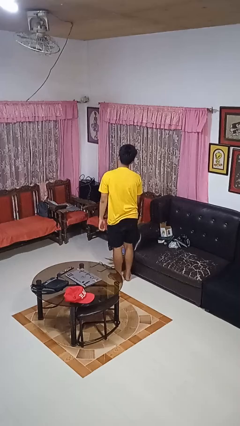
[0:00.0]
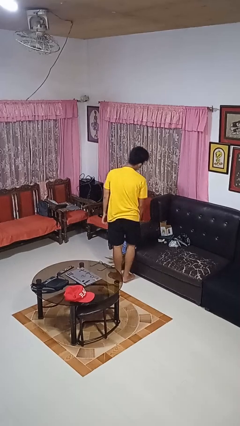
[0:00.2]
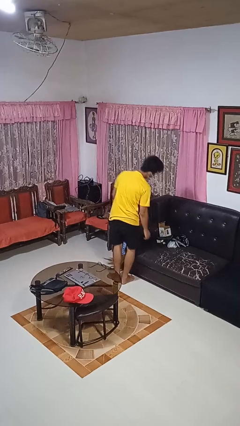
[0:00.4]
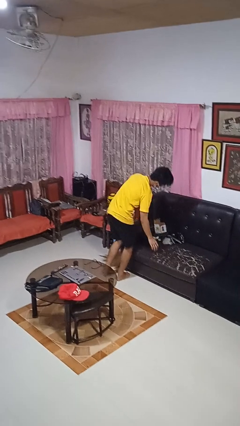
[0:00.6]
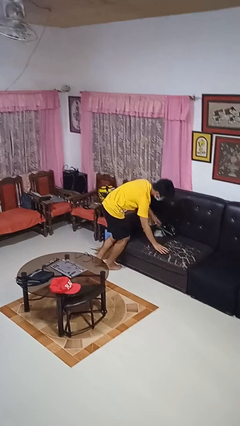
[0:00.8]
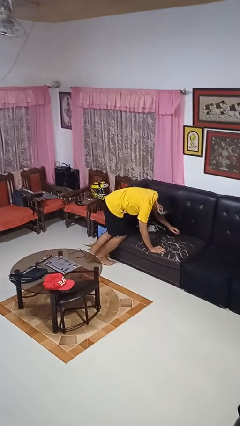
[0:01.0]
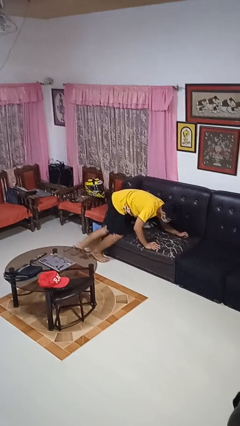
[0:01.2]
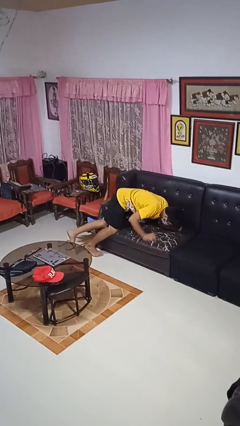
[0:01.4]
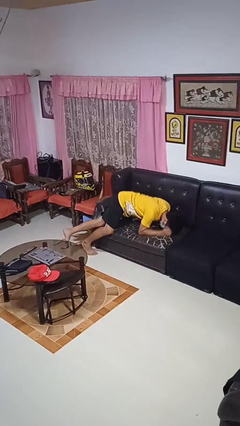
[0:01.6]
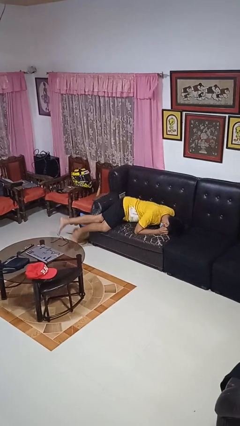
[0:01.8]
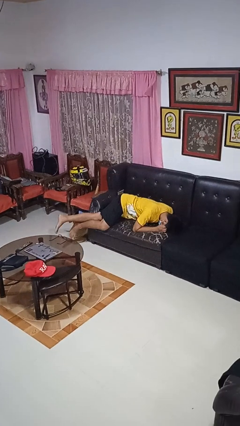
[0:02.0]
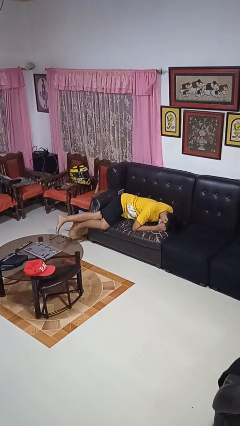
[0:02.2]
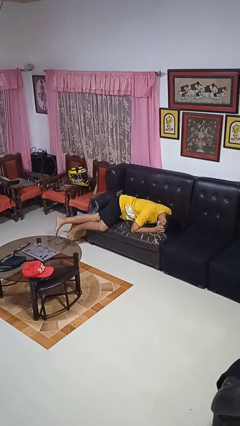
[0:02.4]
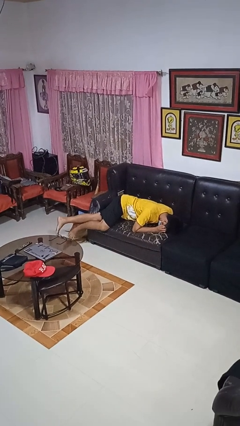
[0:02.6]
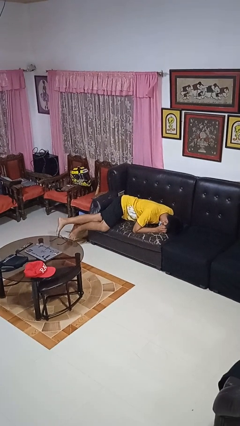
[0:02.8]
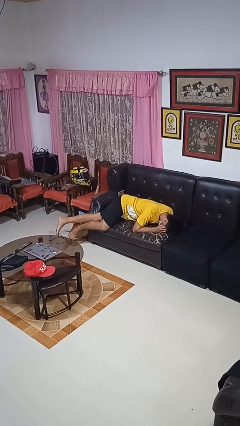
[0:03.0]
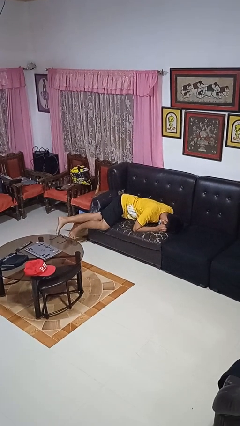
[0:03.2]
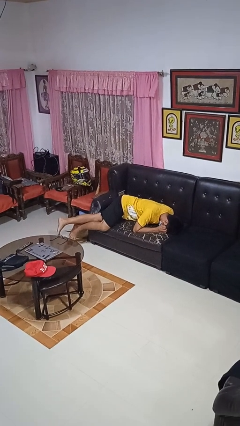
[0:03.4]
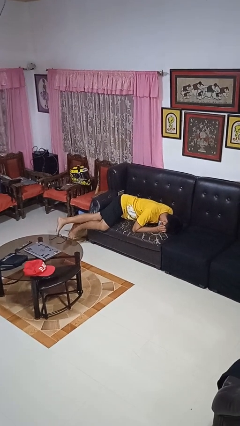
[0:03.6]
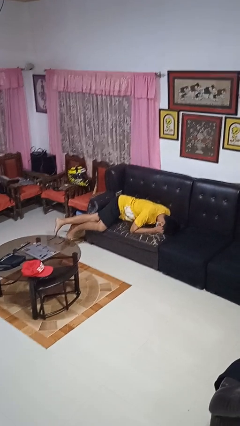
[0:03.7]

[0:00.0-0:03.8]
person lies down on couch

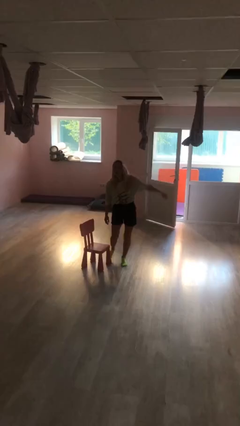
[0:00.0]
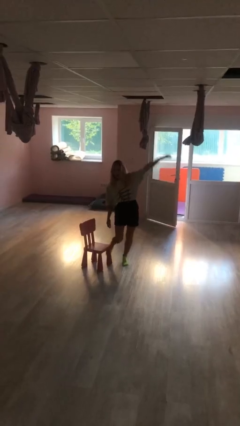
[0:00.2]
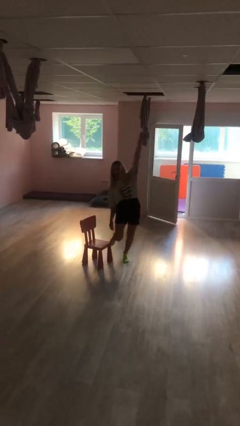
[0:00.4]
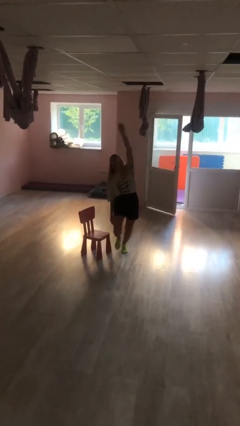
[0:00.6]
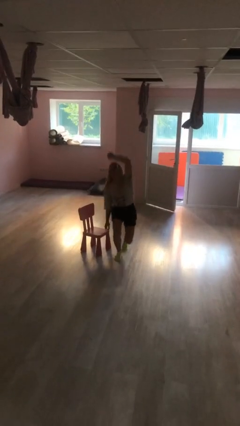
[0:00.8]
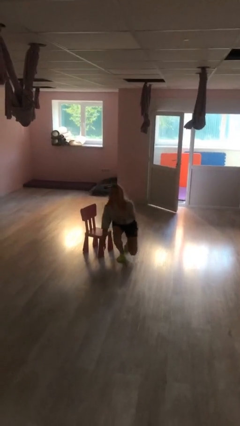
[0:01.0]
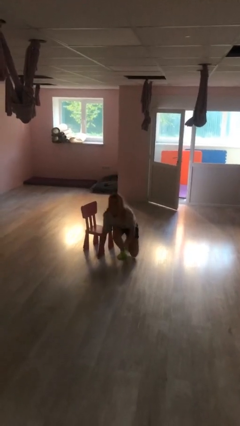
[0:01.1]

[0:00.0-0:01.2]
person trips on object on floor

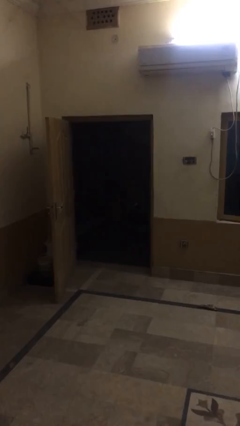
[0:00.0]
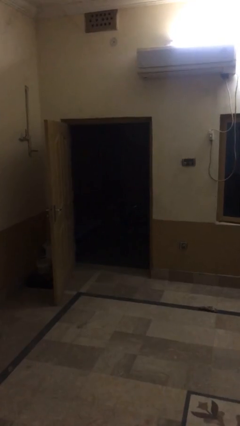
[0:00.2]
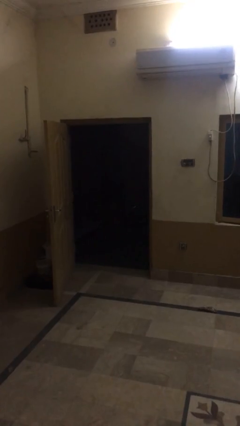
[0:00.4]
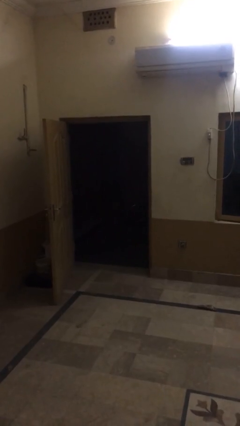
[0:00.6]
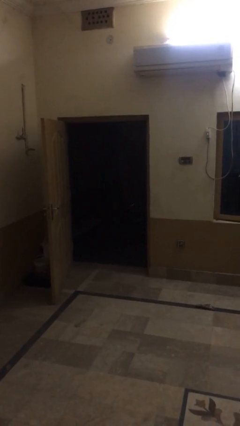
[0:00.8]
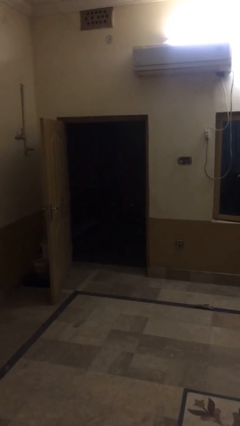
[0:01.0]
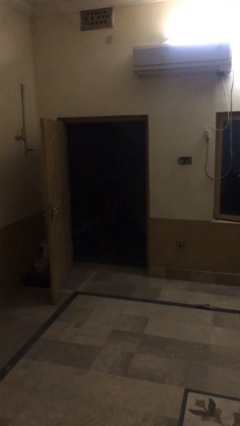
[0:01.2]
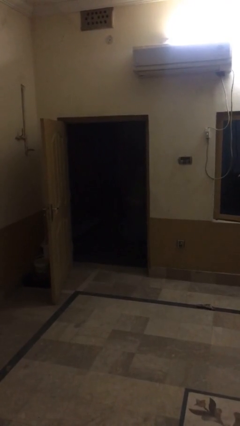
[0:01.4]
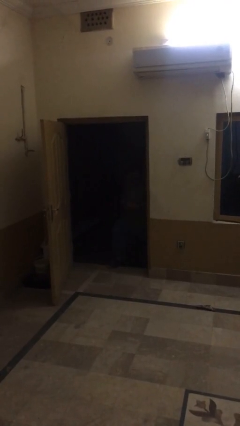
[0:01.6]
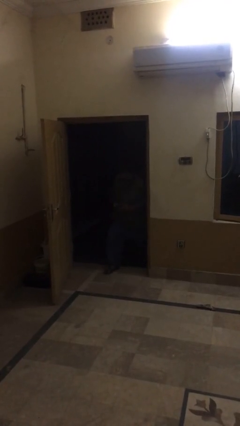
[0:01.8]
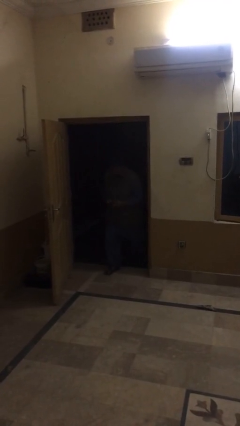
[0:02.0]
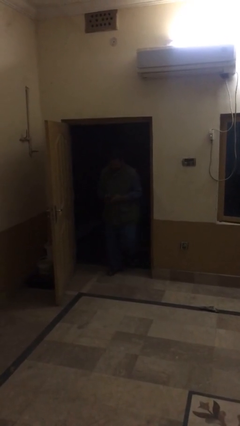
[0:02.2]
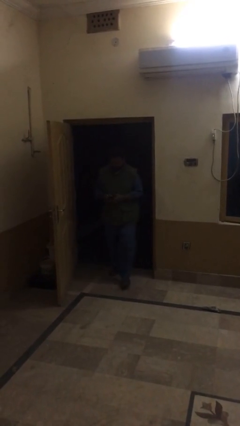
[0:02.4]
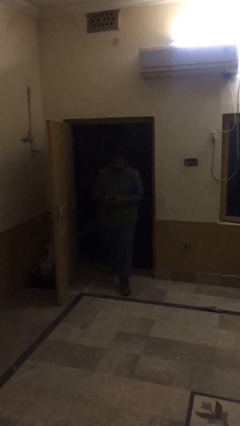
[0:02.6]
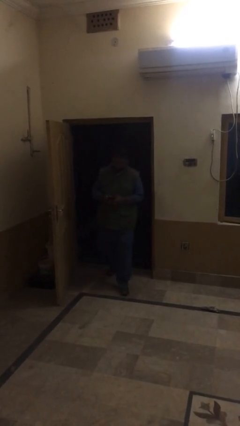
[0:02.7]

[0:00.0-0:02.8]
person enters scene through structure

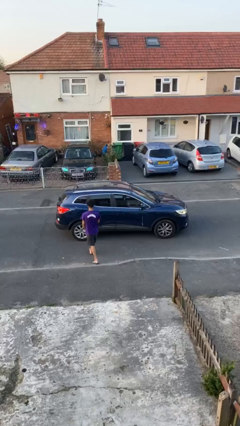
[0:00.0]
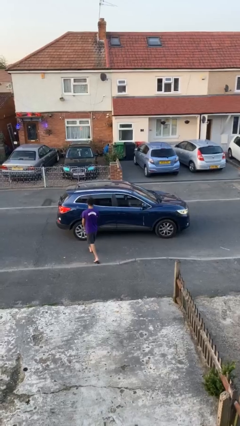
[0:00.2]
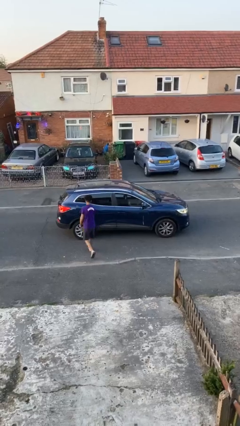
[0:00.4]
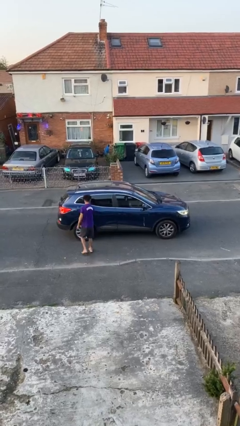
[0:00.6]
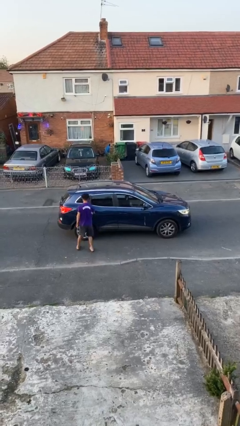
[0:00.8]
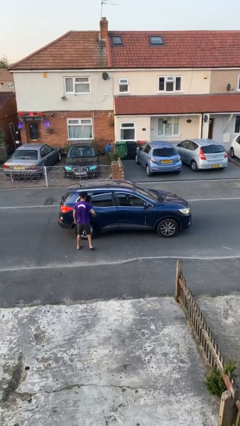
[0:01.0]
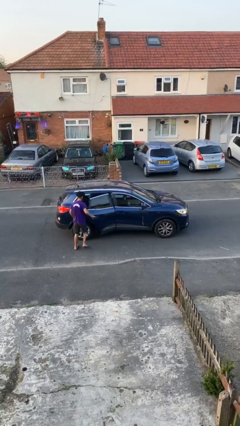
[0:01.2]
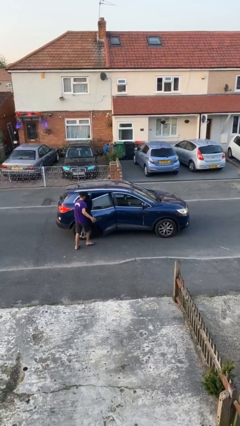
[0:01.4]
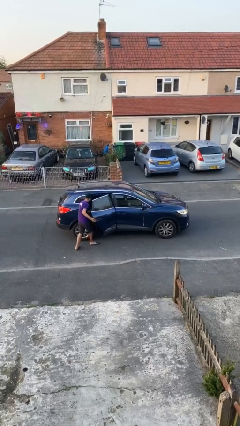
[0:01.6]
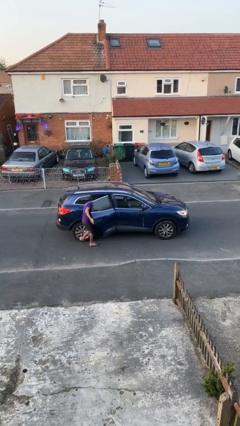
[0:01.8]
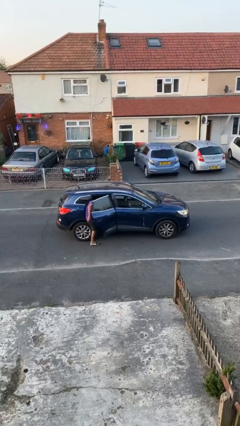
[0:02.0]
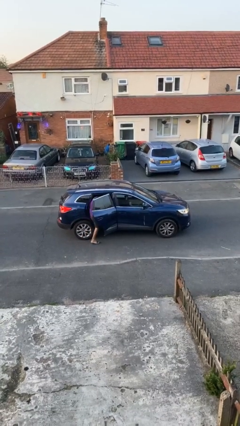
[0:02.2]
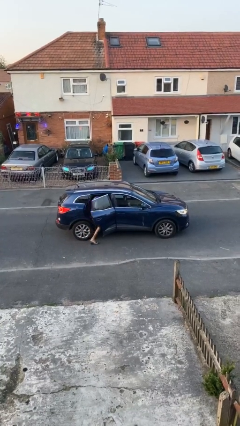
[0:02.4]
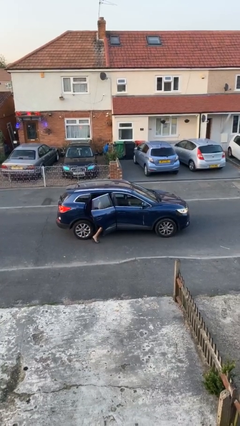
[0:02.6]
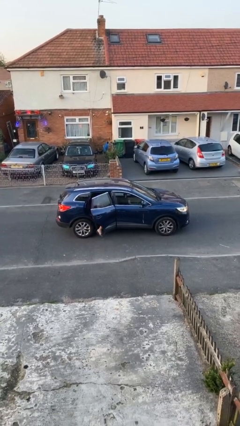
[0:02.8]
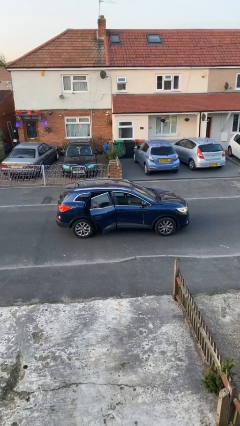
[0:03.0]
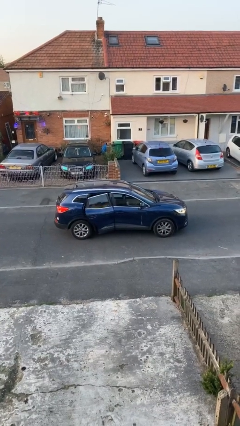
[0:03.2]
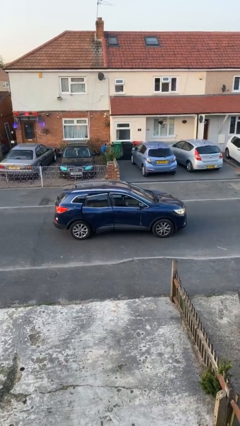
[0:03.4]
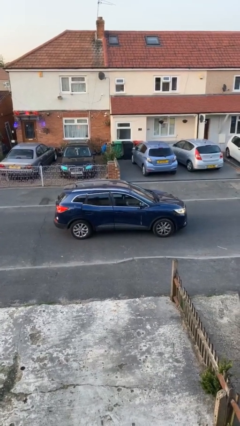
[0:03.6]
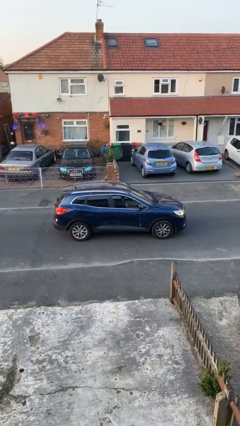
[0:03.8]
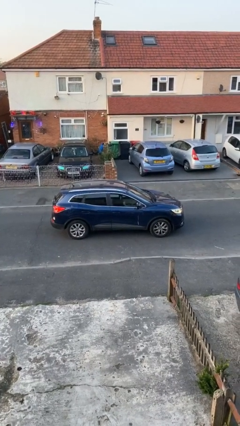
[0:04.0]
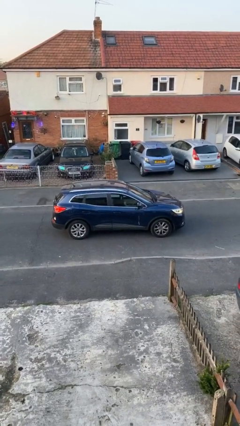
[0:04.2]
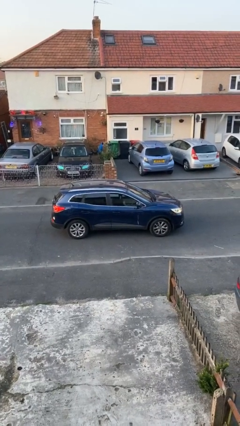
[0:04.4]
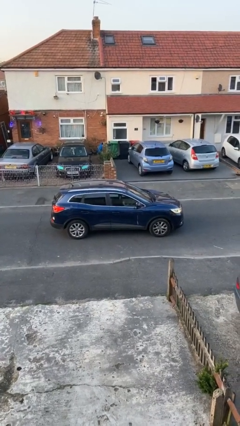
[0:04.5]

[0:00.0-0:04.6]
car picks up person

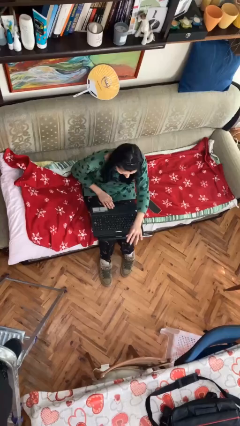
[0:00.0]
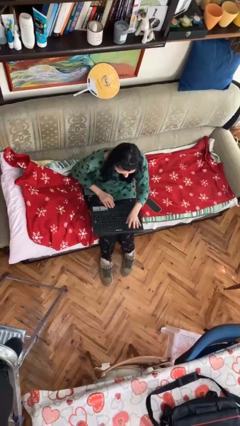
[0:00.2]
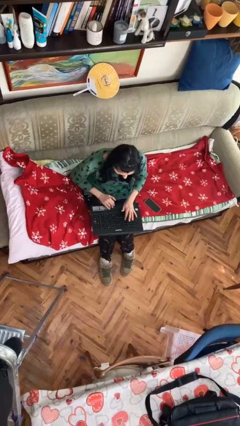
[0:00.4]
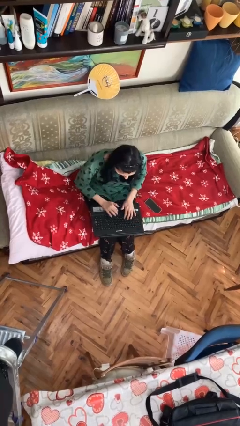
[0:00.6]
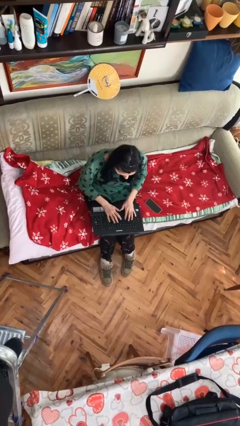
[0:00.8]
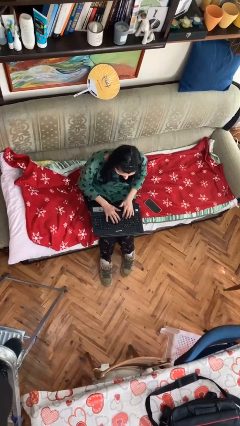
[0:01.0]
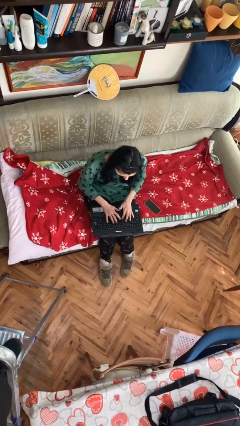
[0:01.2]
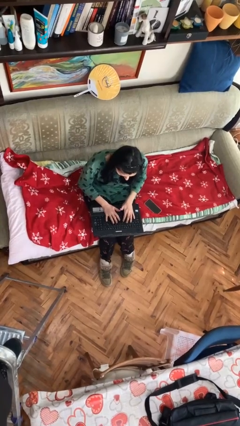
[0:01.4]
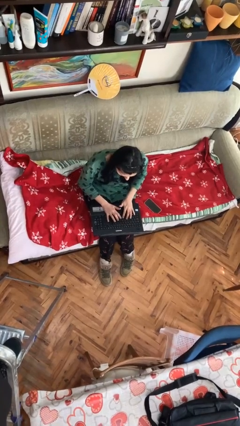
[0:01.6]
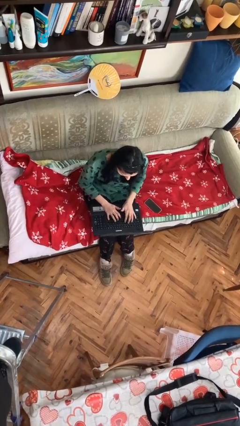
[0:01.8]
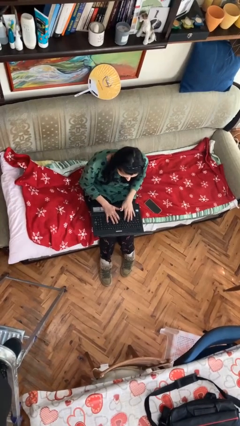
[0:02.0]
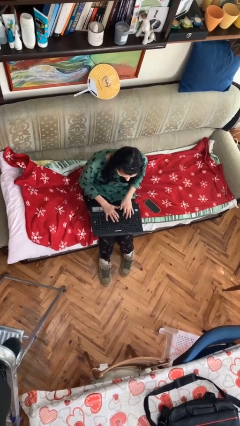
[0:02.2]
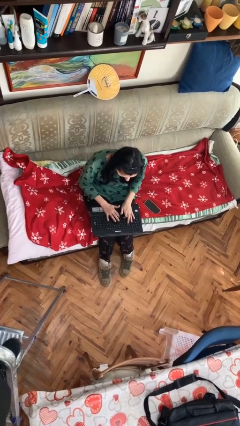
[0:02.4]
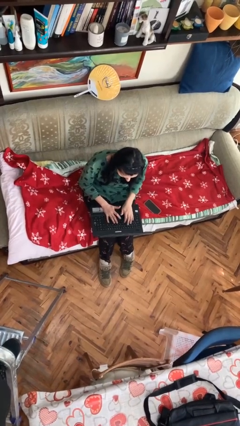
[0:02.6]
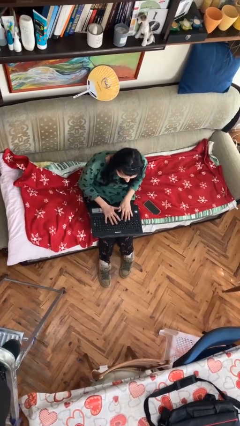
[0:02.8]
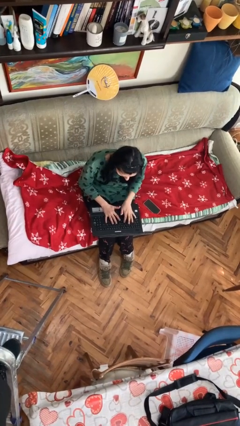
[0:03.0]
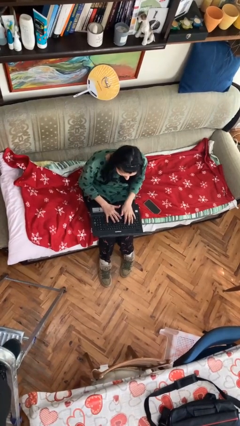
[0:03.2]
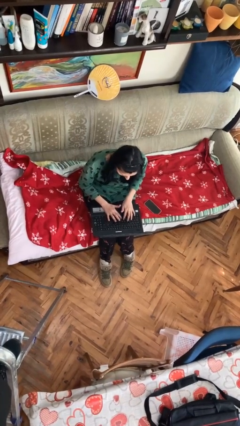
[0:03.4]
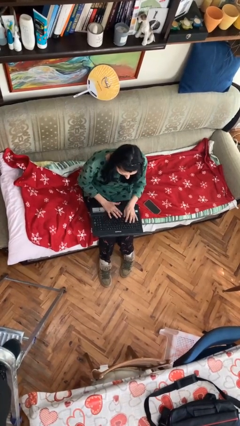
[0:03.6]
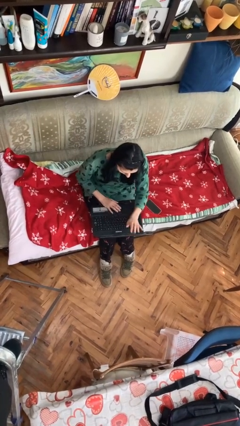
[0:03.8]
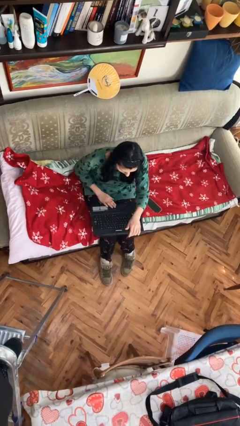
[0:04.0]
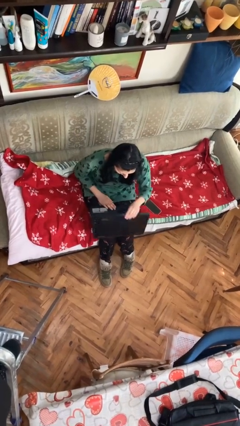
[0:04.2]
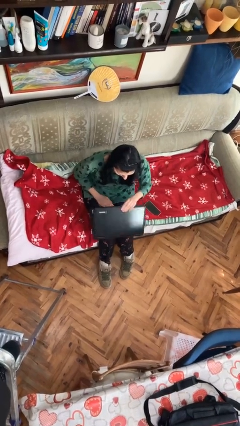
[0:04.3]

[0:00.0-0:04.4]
person interacts with laptop

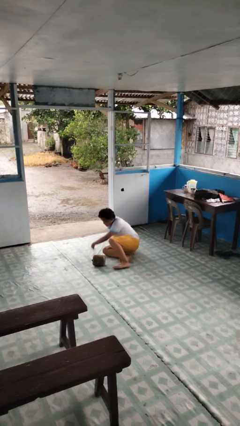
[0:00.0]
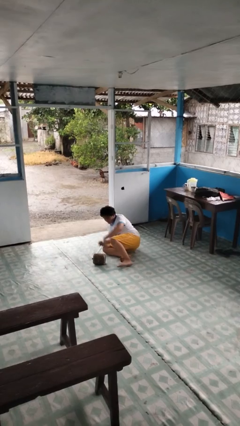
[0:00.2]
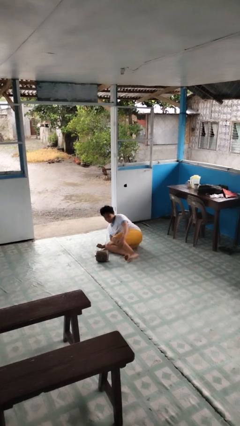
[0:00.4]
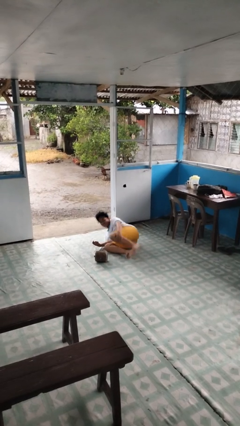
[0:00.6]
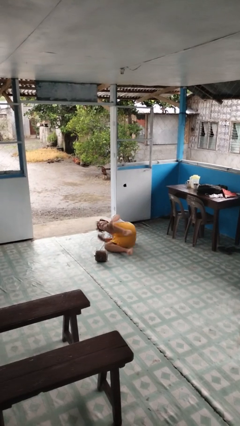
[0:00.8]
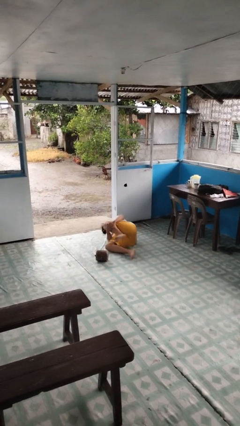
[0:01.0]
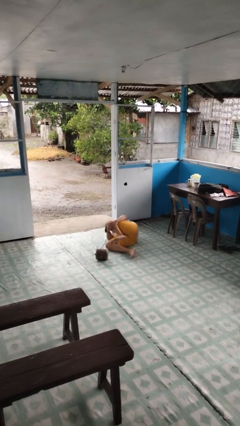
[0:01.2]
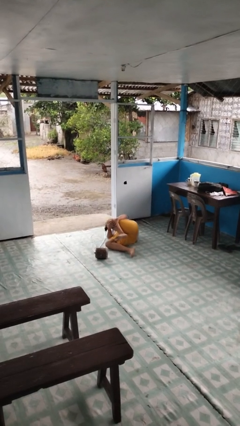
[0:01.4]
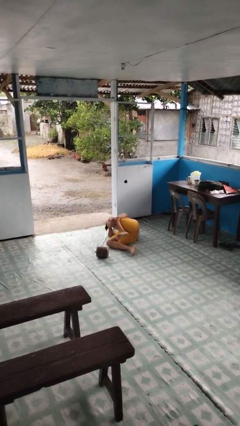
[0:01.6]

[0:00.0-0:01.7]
person lies down on floor
